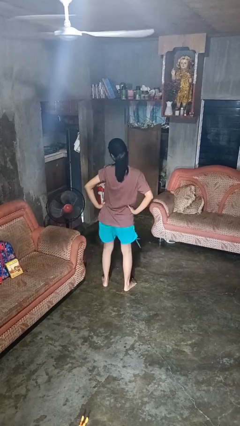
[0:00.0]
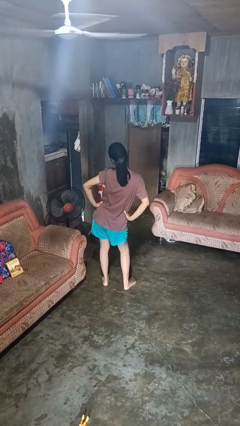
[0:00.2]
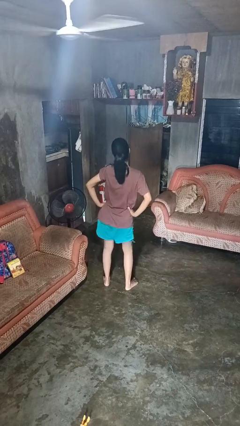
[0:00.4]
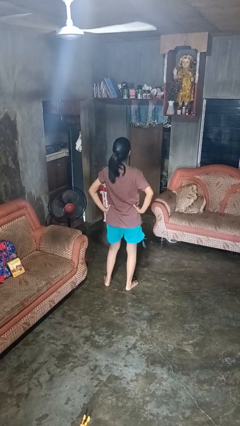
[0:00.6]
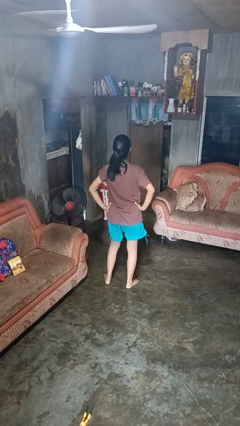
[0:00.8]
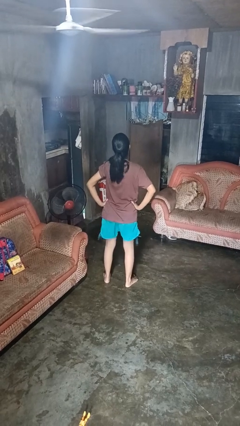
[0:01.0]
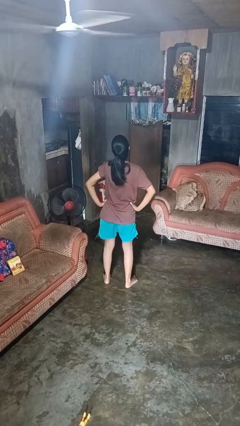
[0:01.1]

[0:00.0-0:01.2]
person dances in place

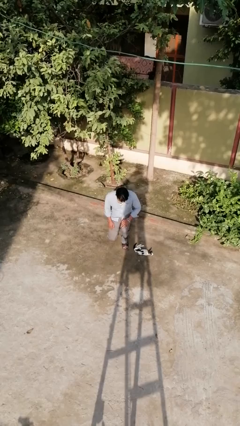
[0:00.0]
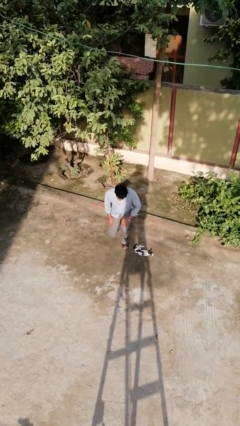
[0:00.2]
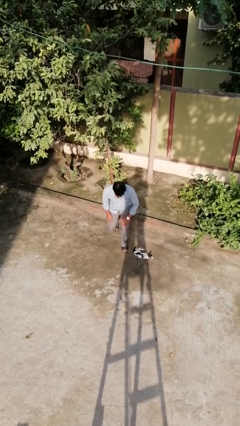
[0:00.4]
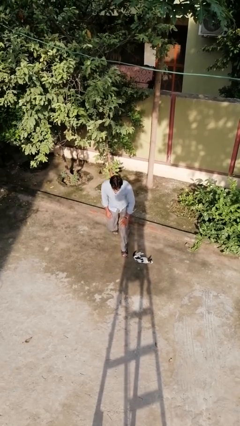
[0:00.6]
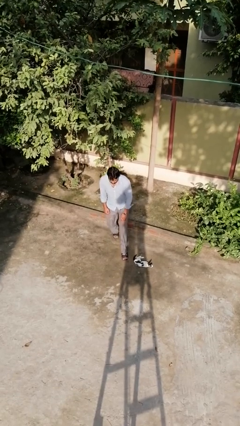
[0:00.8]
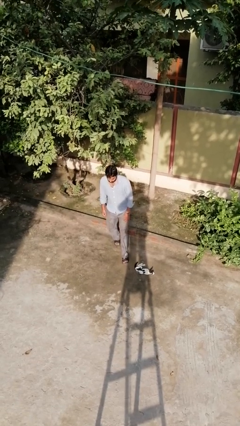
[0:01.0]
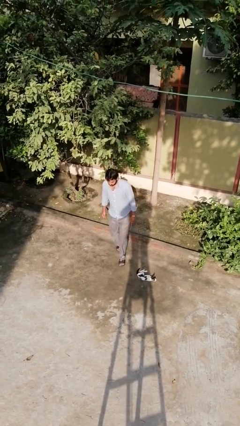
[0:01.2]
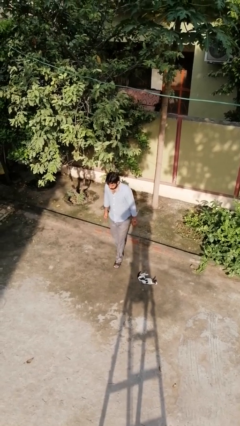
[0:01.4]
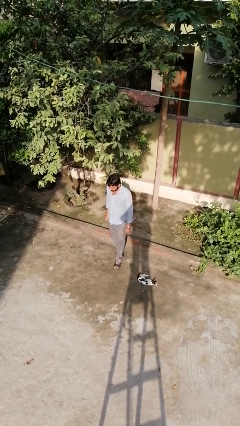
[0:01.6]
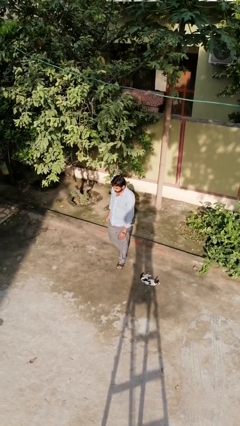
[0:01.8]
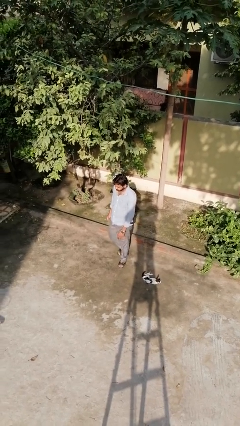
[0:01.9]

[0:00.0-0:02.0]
person stands up from floor

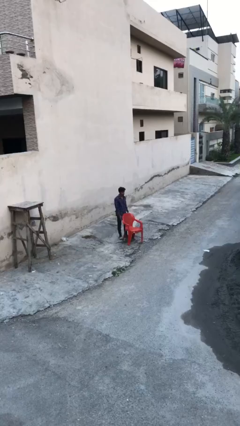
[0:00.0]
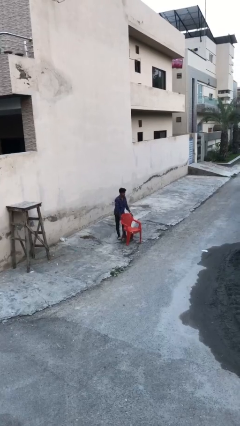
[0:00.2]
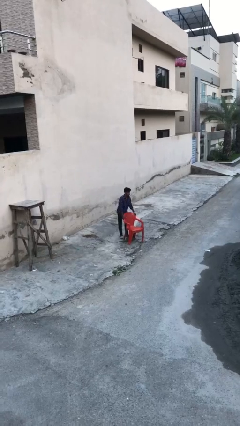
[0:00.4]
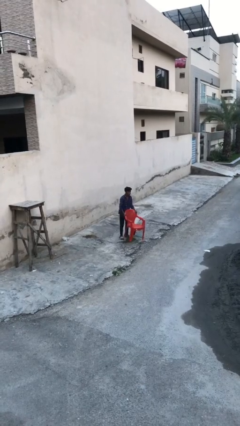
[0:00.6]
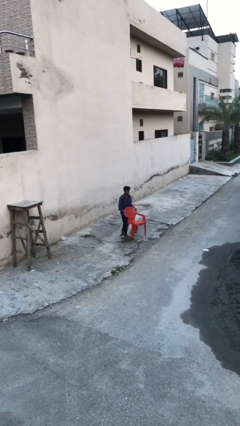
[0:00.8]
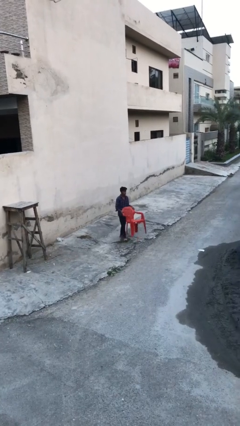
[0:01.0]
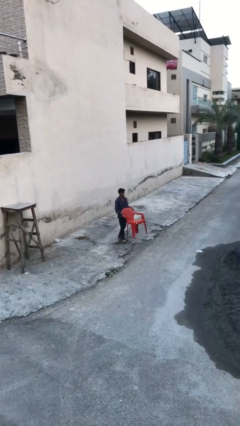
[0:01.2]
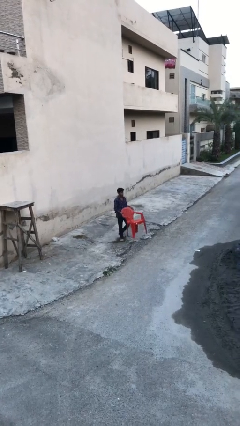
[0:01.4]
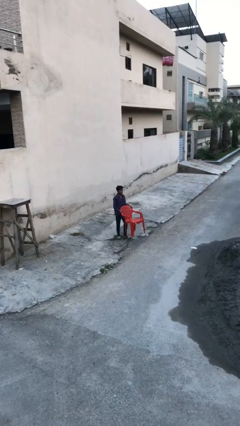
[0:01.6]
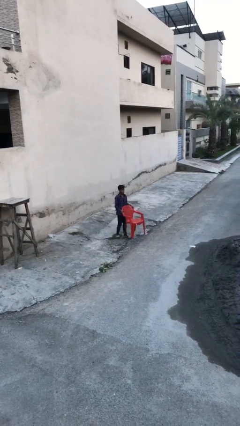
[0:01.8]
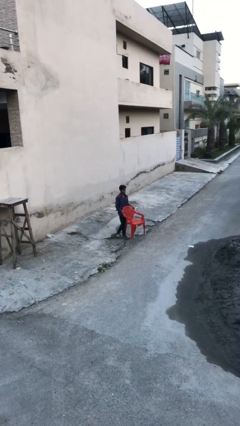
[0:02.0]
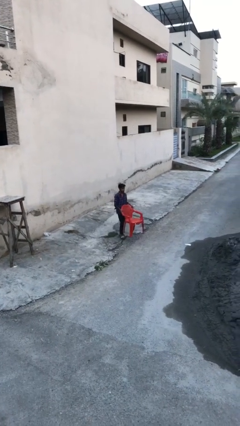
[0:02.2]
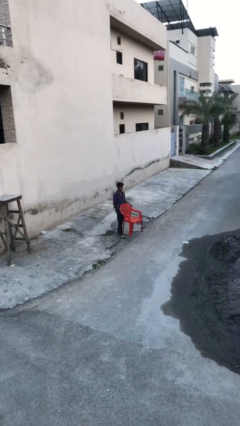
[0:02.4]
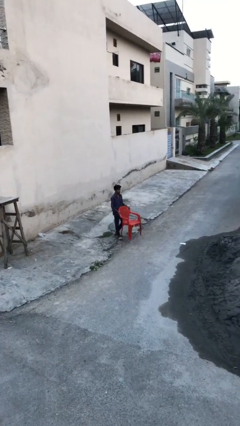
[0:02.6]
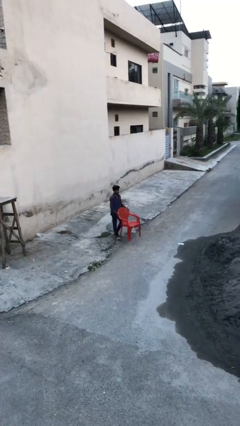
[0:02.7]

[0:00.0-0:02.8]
person carries heavy object

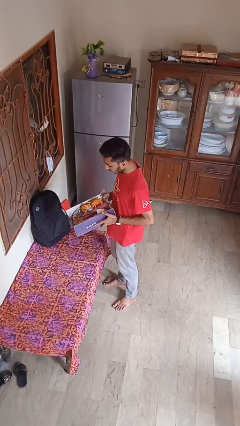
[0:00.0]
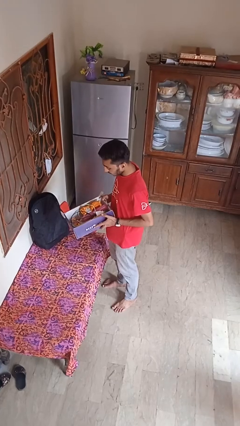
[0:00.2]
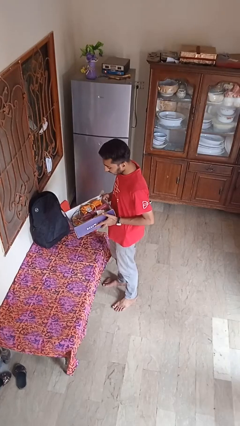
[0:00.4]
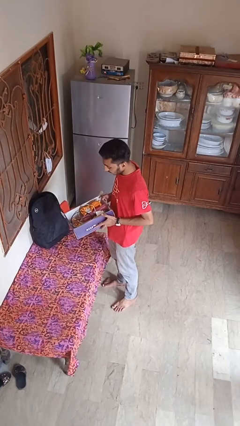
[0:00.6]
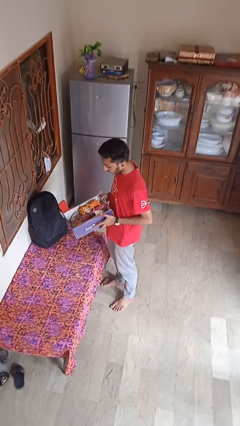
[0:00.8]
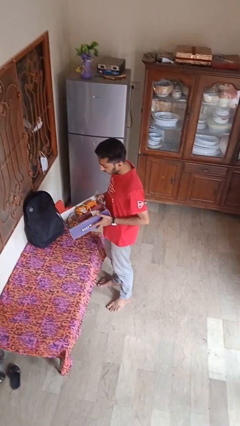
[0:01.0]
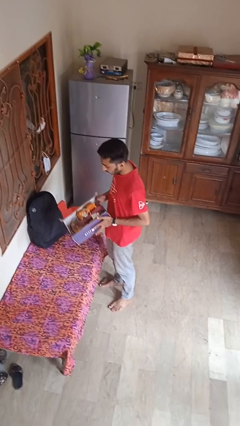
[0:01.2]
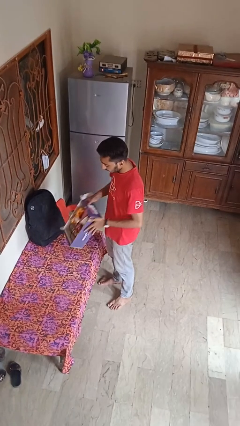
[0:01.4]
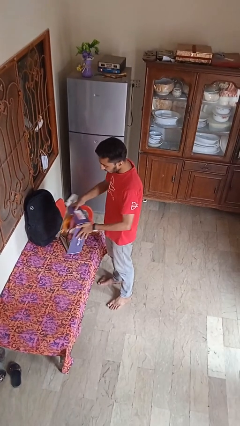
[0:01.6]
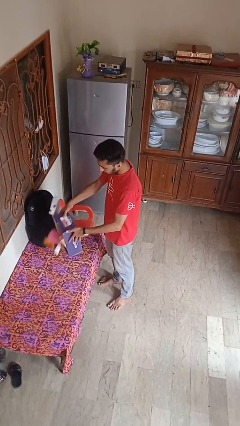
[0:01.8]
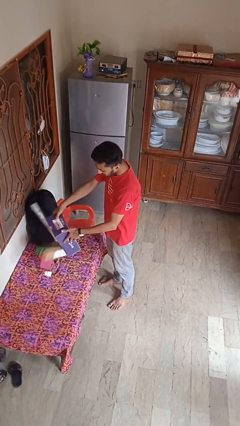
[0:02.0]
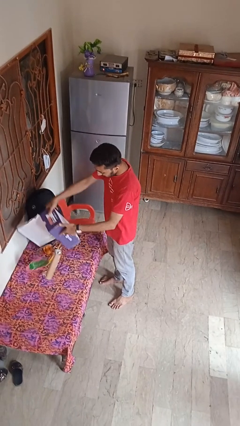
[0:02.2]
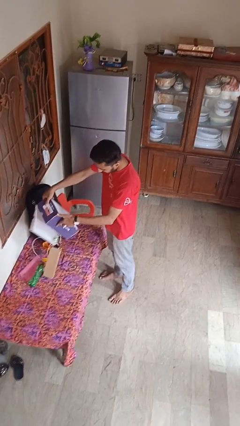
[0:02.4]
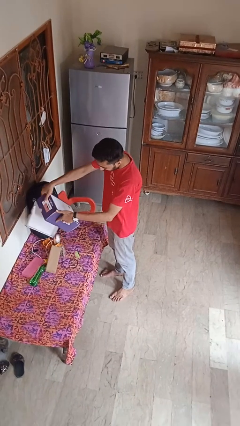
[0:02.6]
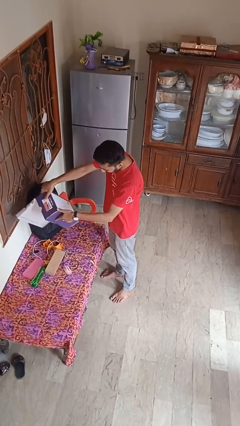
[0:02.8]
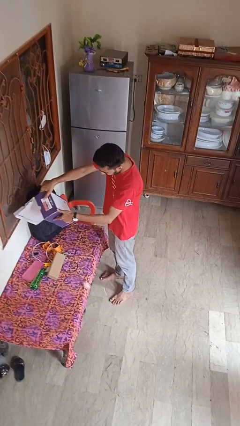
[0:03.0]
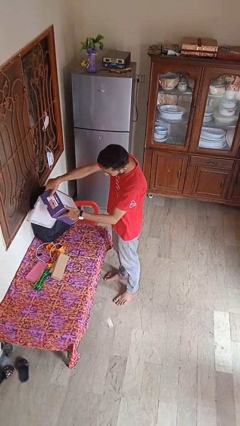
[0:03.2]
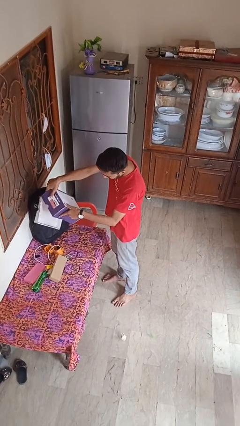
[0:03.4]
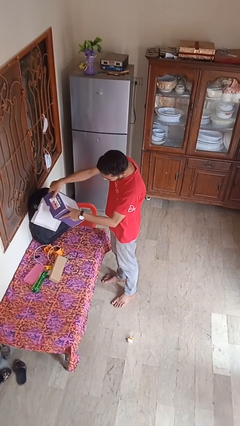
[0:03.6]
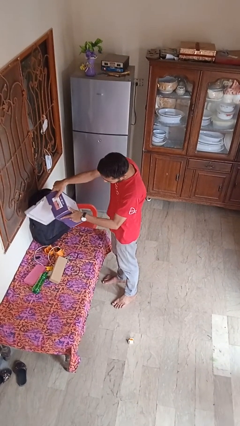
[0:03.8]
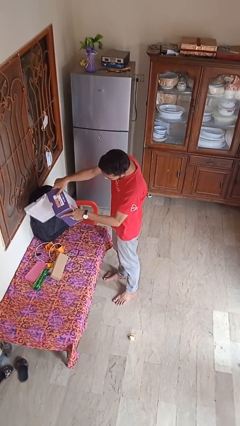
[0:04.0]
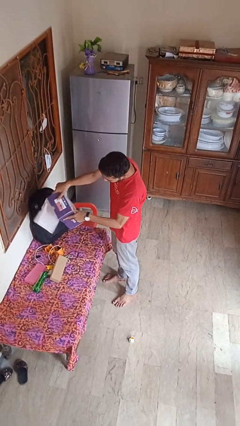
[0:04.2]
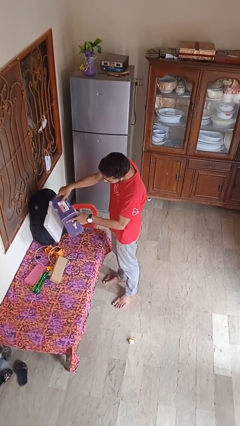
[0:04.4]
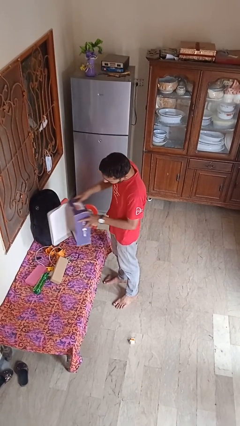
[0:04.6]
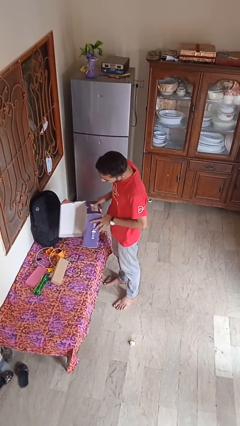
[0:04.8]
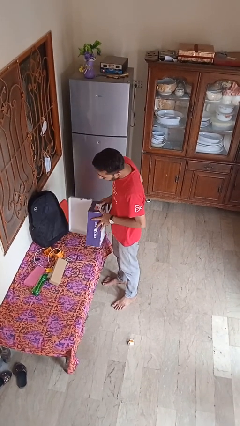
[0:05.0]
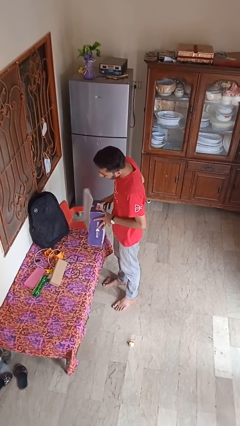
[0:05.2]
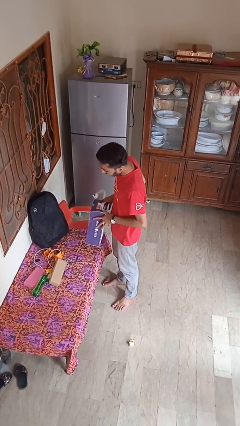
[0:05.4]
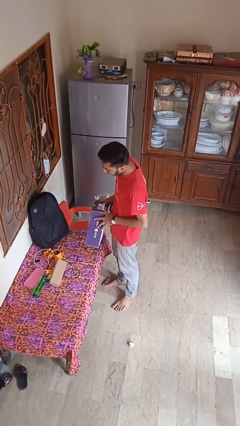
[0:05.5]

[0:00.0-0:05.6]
person unloads box onto table

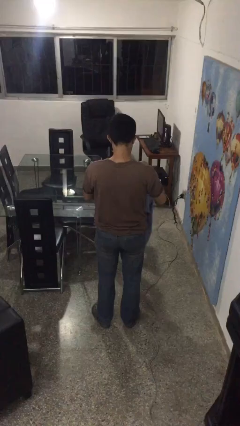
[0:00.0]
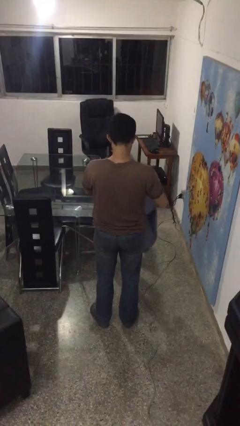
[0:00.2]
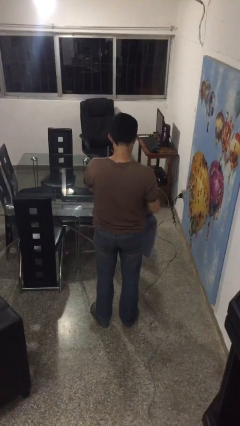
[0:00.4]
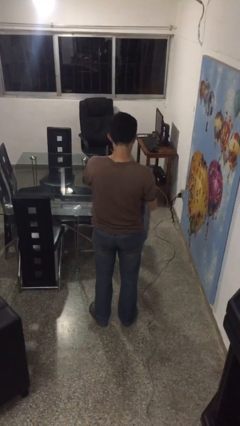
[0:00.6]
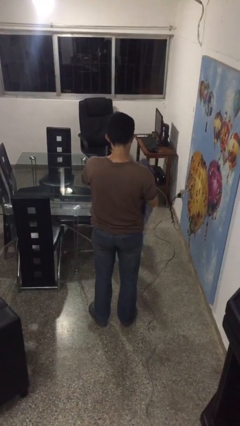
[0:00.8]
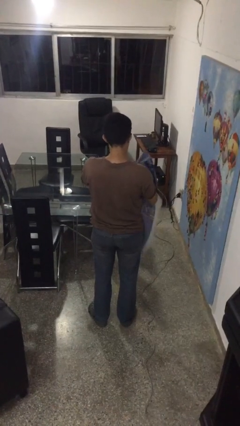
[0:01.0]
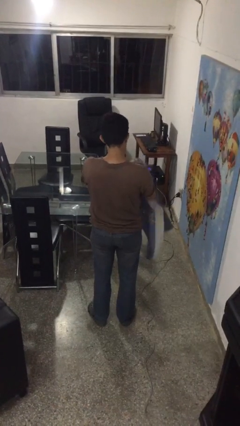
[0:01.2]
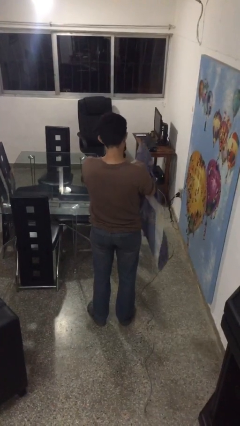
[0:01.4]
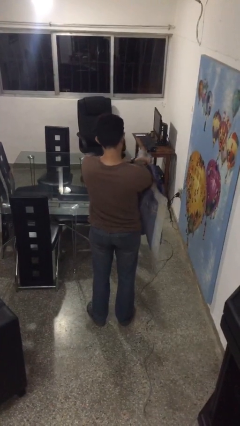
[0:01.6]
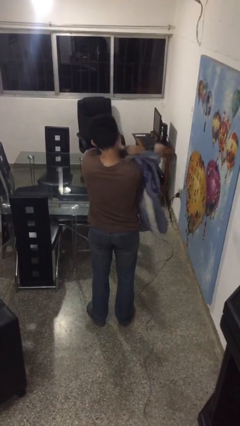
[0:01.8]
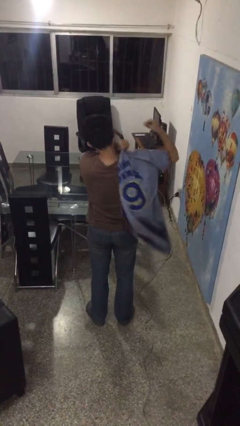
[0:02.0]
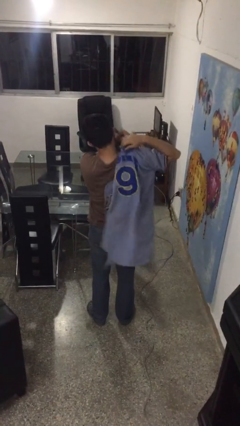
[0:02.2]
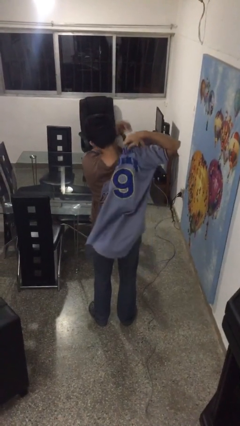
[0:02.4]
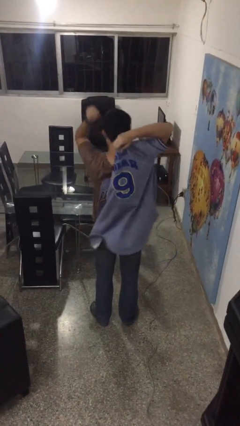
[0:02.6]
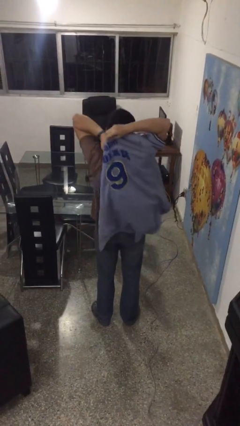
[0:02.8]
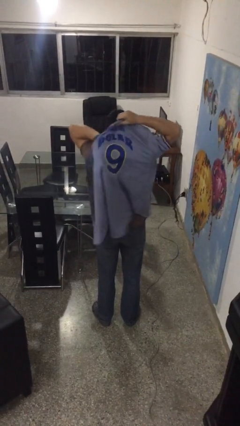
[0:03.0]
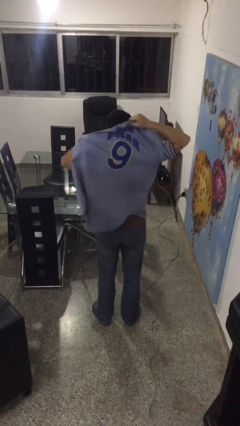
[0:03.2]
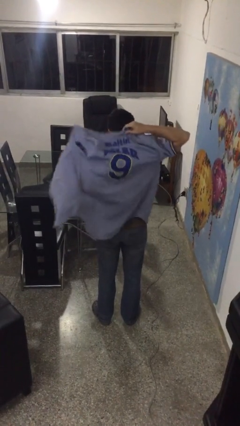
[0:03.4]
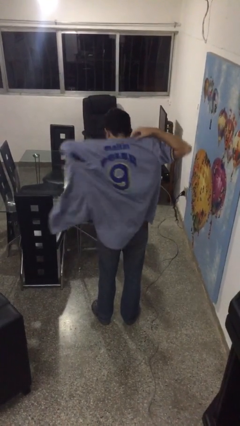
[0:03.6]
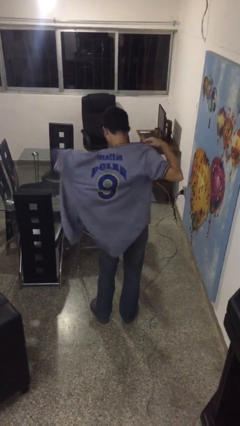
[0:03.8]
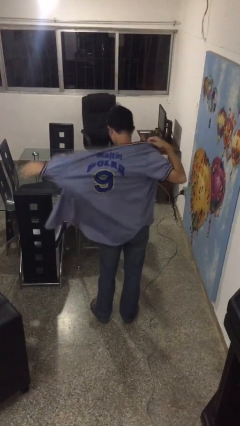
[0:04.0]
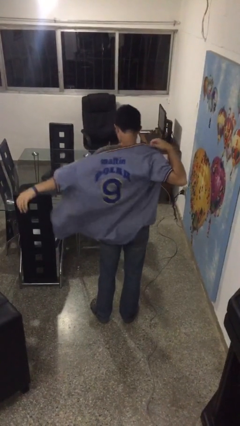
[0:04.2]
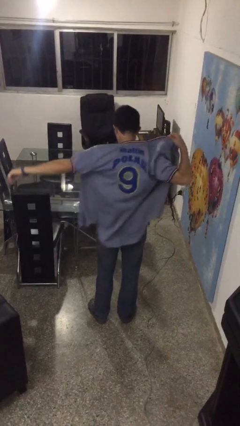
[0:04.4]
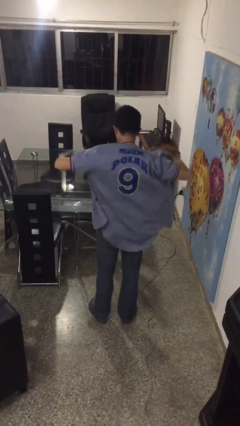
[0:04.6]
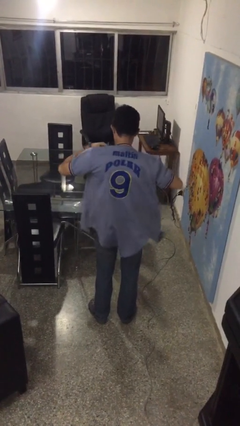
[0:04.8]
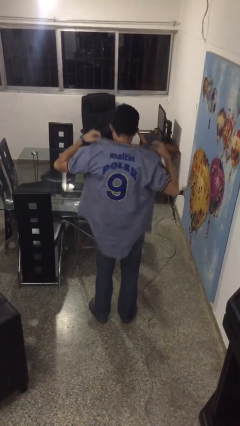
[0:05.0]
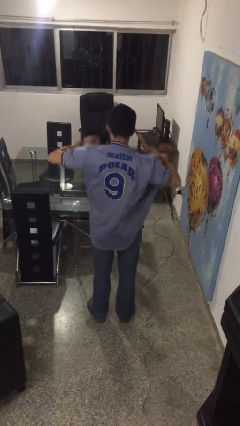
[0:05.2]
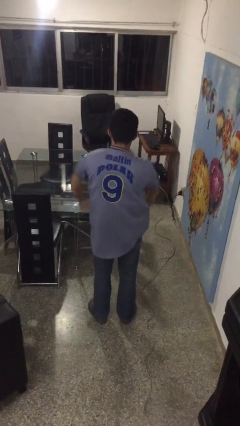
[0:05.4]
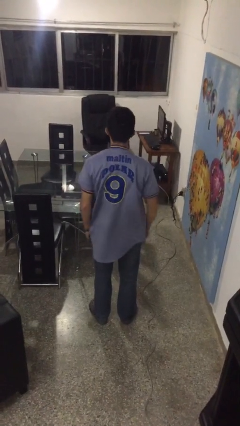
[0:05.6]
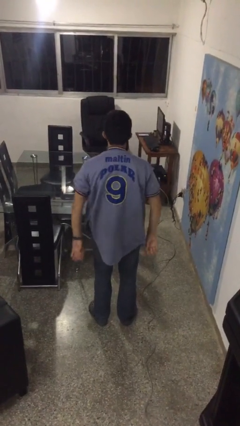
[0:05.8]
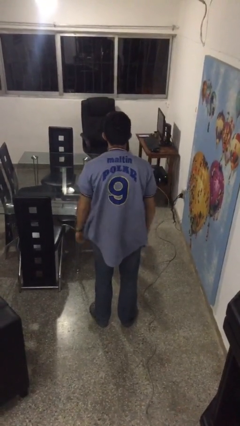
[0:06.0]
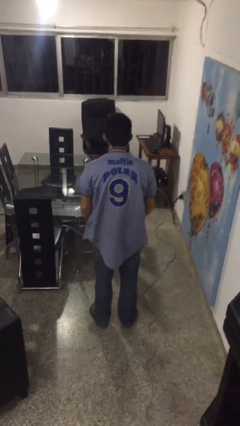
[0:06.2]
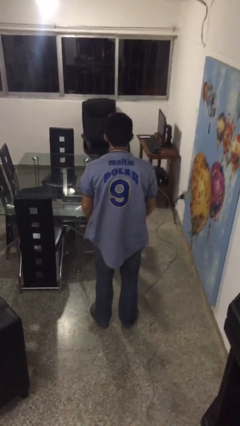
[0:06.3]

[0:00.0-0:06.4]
person puts on shirt
